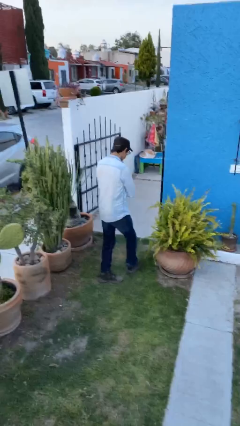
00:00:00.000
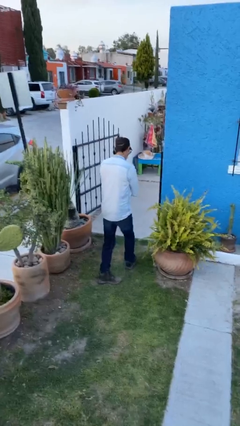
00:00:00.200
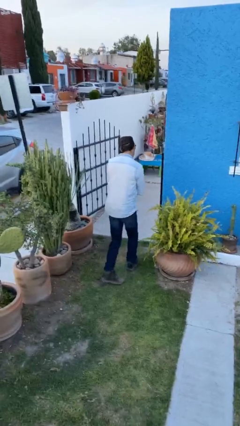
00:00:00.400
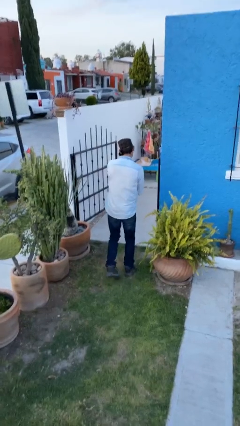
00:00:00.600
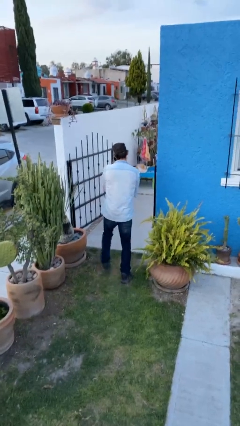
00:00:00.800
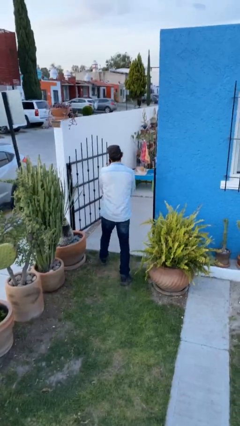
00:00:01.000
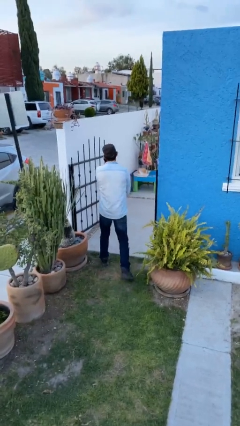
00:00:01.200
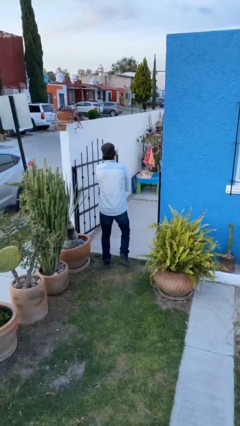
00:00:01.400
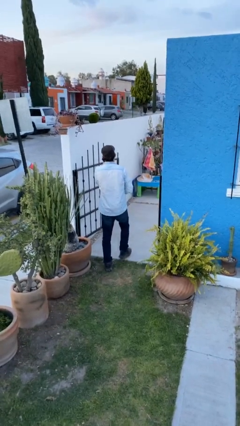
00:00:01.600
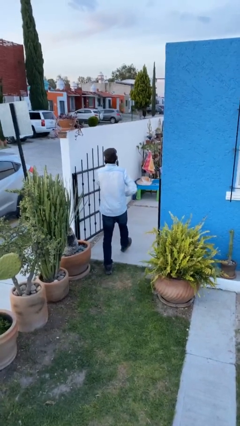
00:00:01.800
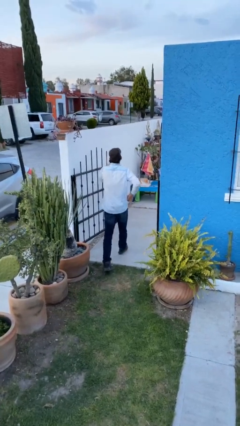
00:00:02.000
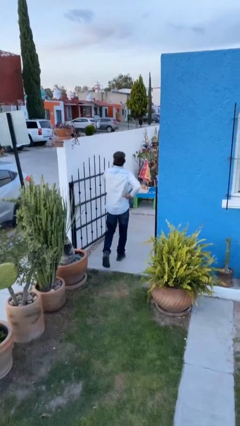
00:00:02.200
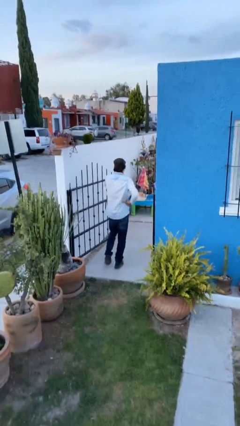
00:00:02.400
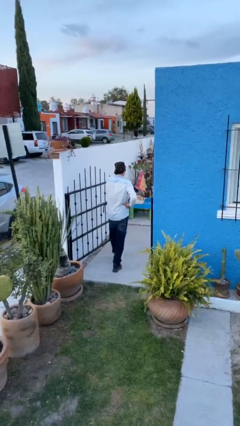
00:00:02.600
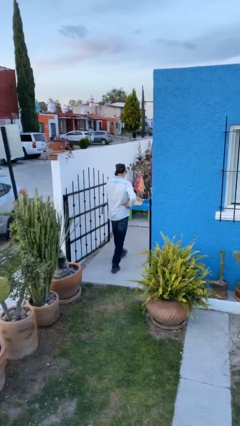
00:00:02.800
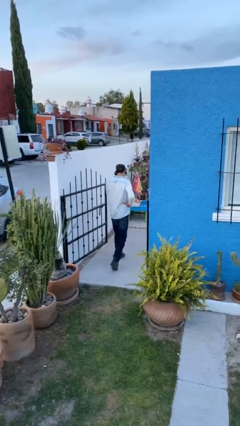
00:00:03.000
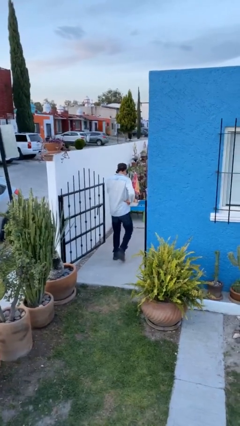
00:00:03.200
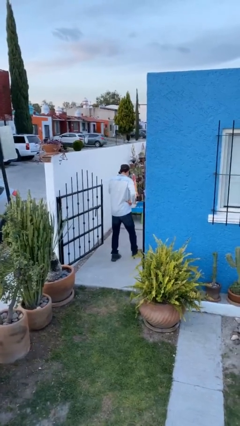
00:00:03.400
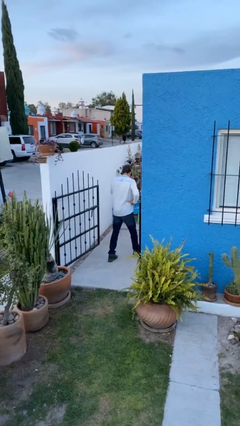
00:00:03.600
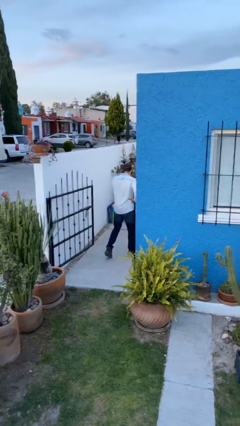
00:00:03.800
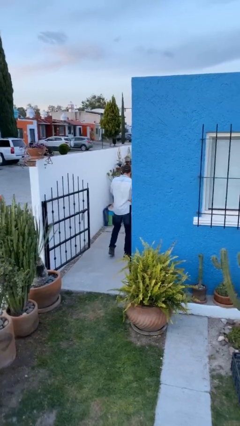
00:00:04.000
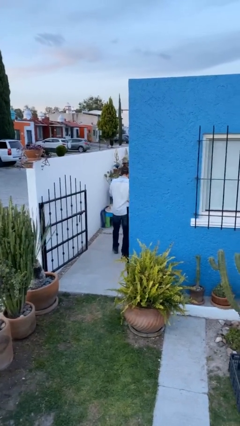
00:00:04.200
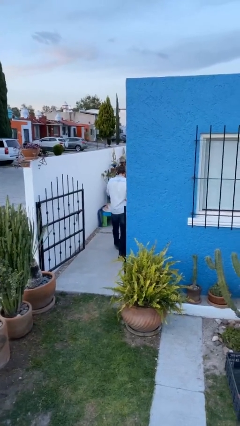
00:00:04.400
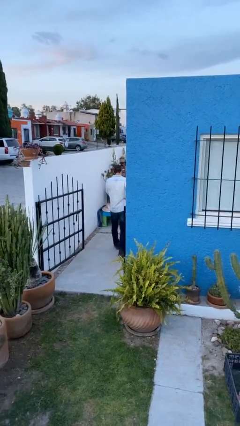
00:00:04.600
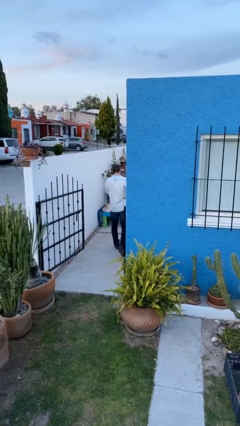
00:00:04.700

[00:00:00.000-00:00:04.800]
person exits scene through structure

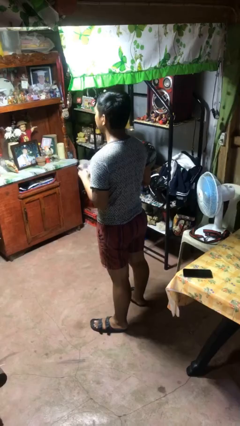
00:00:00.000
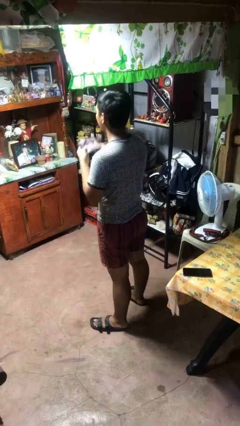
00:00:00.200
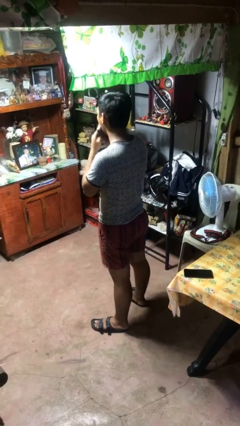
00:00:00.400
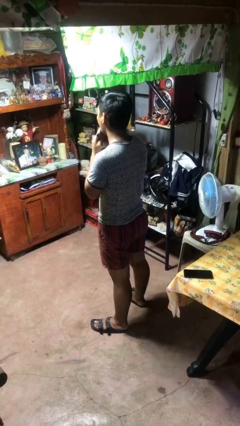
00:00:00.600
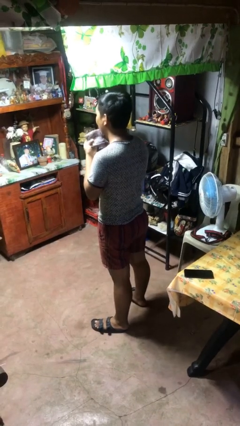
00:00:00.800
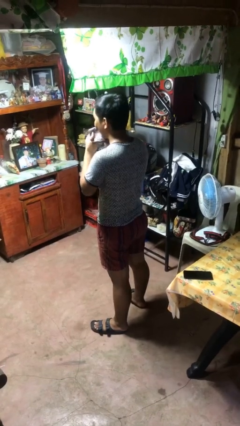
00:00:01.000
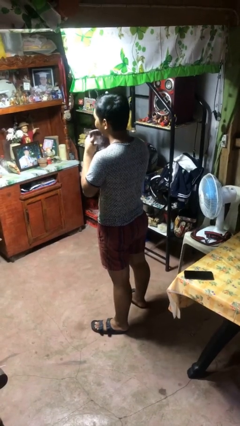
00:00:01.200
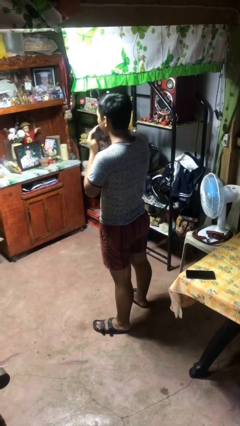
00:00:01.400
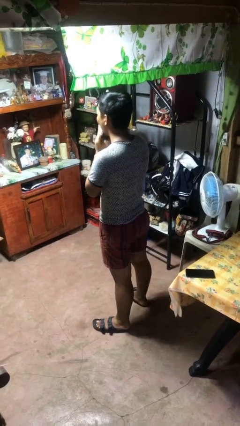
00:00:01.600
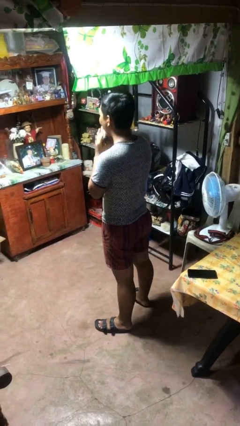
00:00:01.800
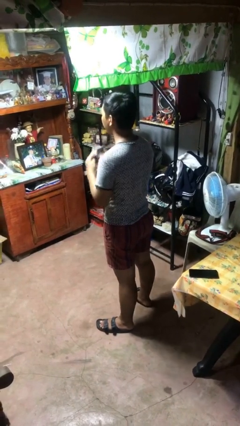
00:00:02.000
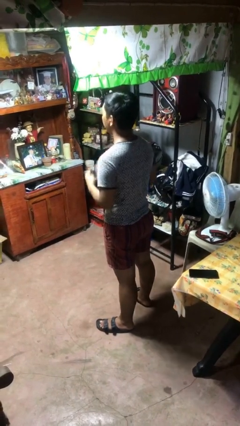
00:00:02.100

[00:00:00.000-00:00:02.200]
person wipes mouth with napkin

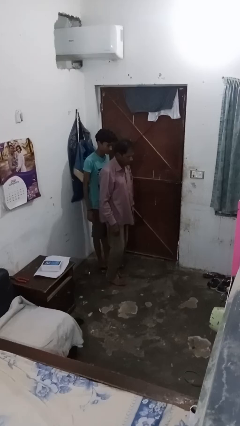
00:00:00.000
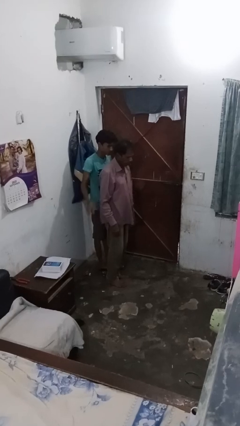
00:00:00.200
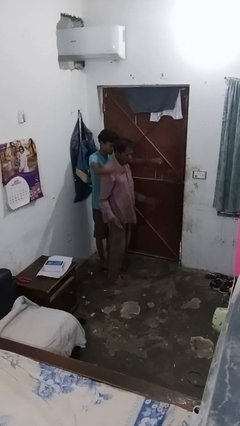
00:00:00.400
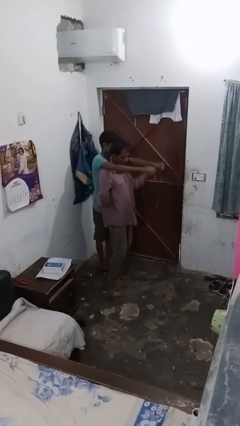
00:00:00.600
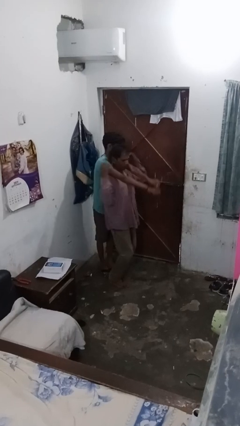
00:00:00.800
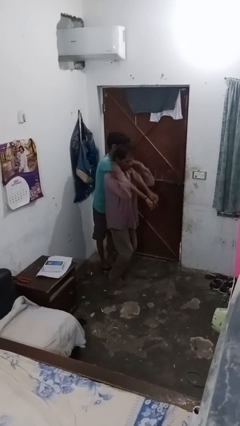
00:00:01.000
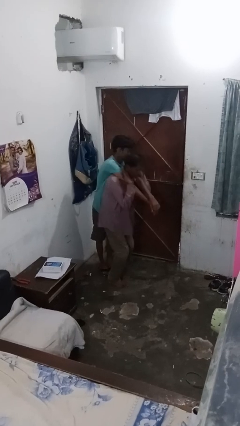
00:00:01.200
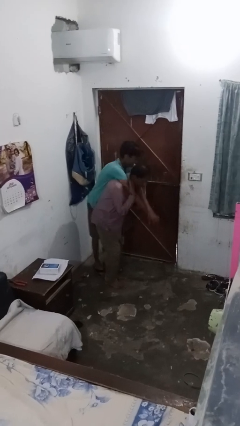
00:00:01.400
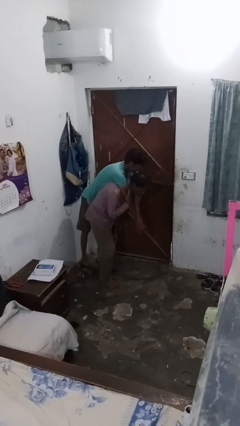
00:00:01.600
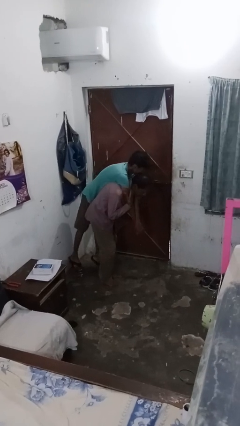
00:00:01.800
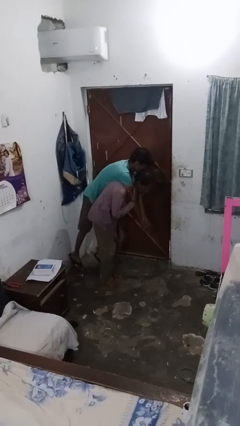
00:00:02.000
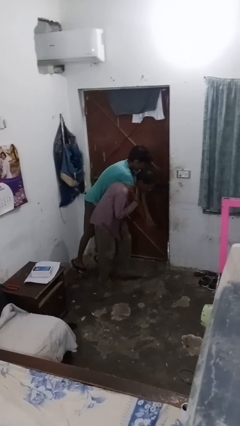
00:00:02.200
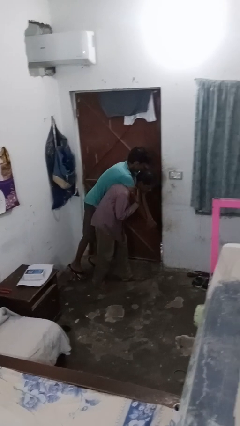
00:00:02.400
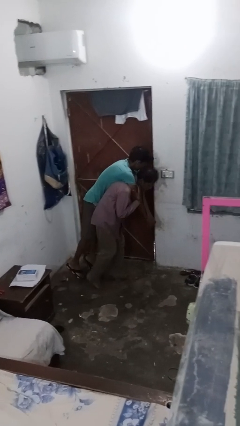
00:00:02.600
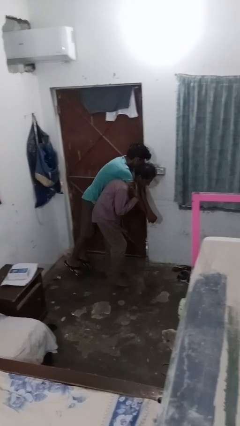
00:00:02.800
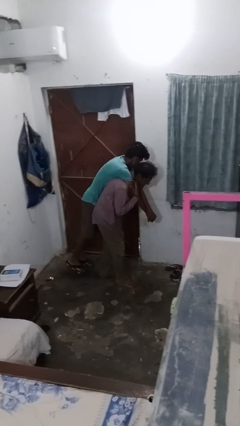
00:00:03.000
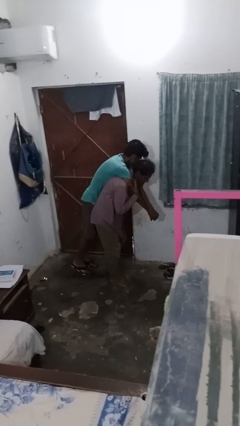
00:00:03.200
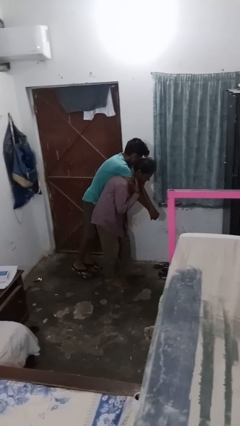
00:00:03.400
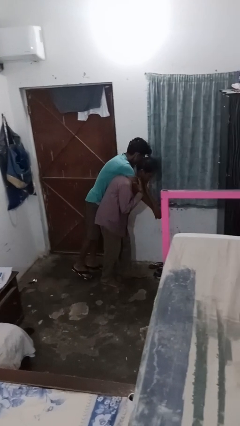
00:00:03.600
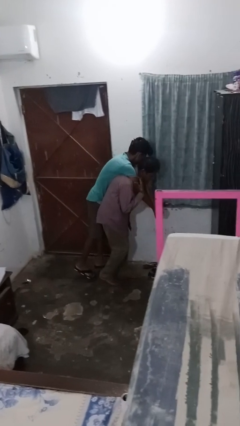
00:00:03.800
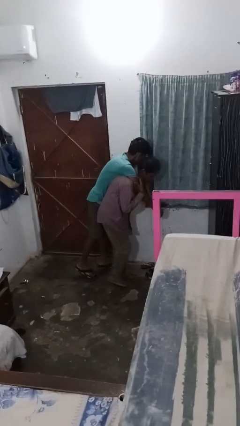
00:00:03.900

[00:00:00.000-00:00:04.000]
person carries person on back

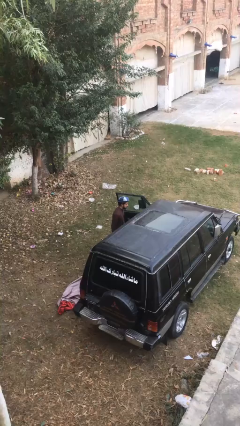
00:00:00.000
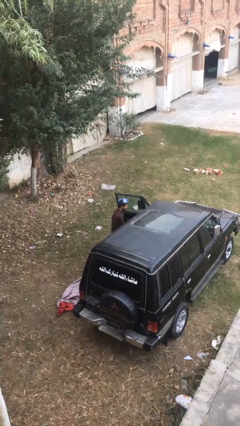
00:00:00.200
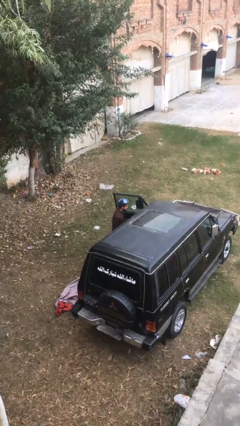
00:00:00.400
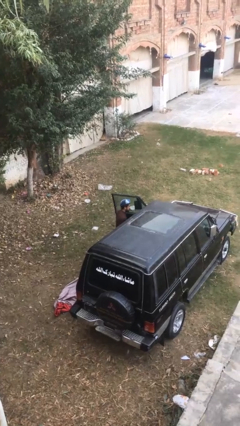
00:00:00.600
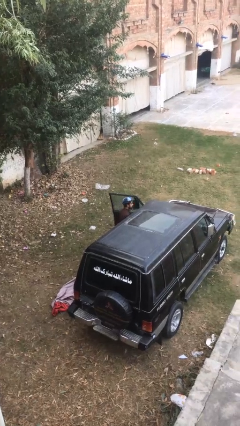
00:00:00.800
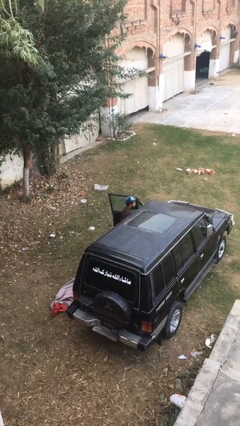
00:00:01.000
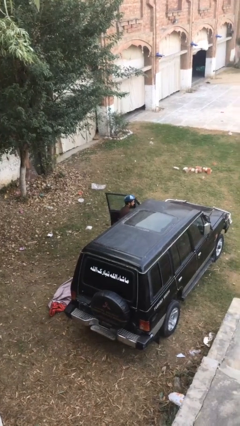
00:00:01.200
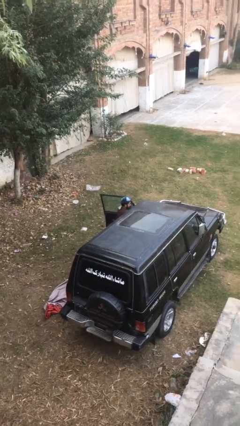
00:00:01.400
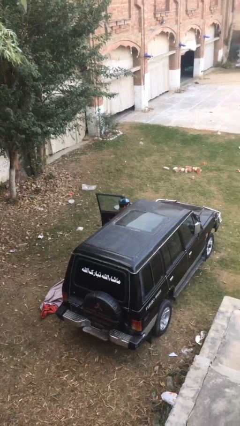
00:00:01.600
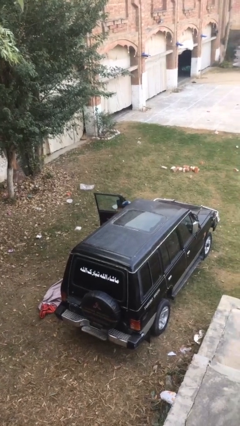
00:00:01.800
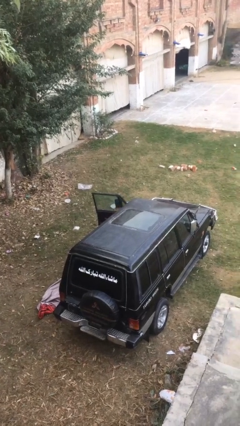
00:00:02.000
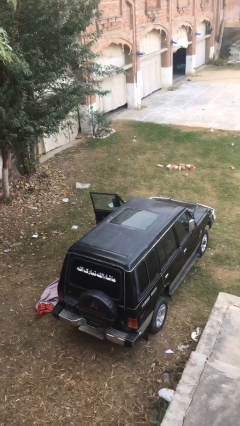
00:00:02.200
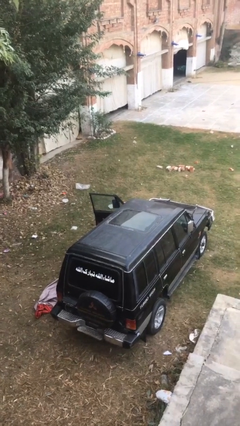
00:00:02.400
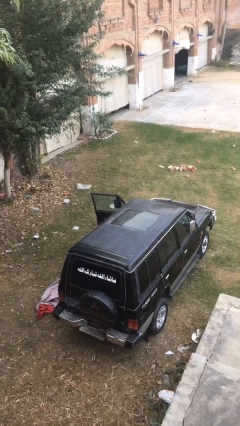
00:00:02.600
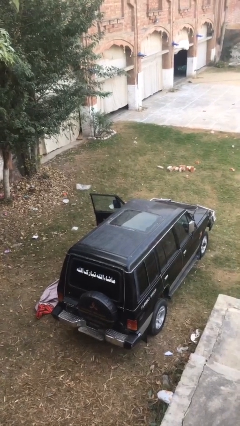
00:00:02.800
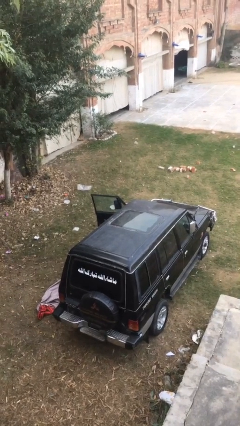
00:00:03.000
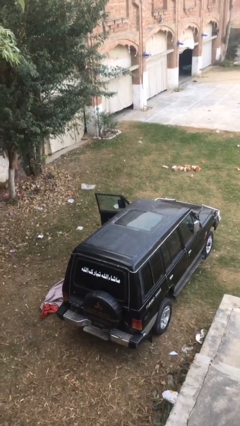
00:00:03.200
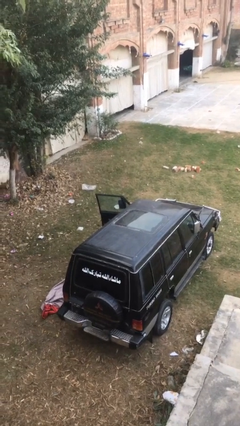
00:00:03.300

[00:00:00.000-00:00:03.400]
person enters car

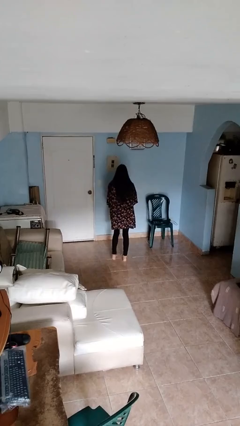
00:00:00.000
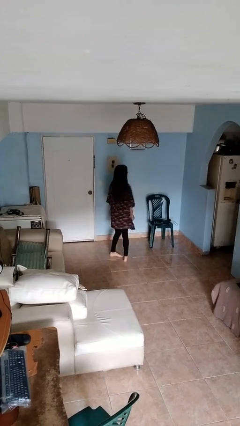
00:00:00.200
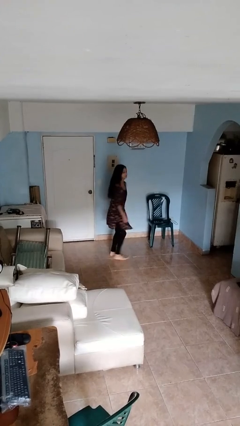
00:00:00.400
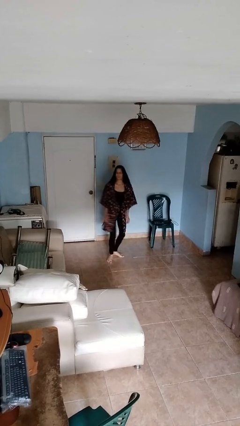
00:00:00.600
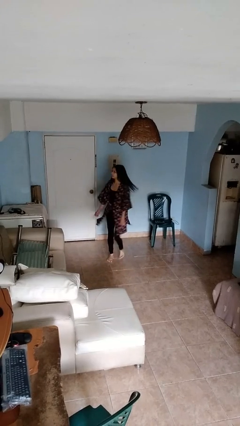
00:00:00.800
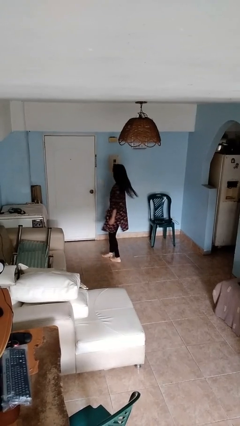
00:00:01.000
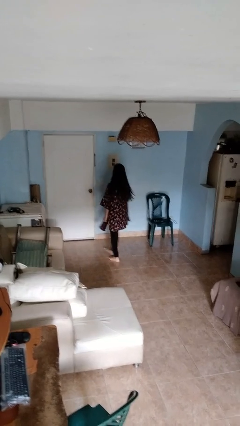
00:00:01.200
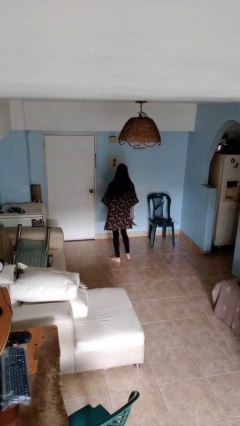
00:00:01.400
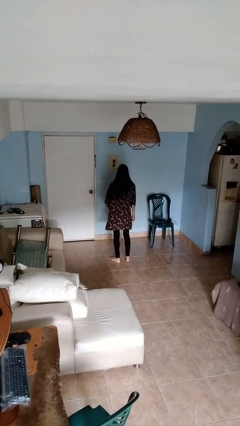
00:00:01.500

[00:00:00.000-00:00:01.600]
person twirls

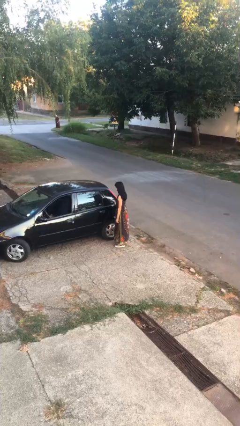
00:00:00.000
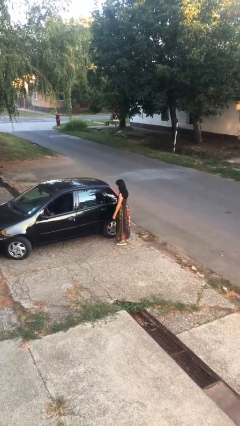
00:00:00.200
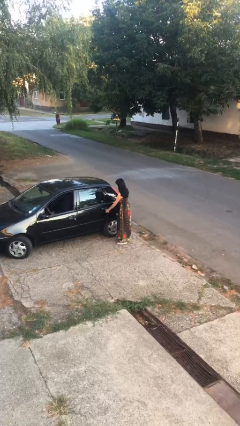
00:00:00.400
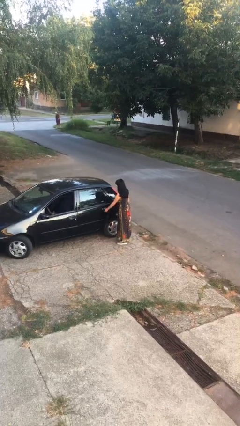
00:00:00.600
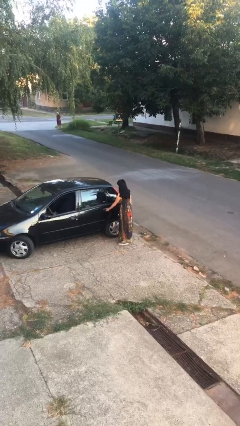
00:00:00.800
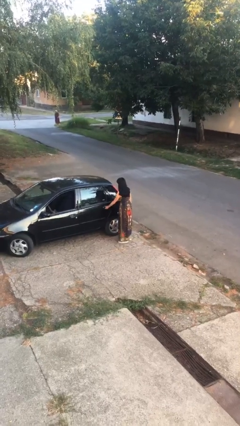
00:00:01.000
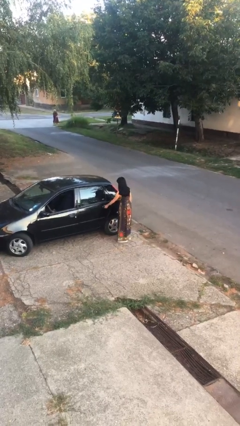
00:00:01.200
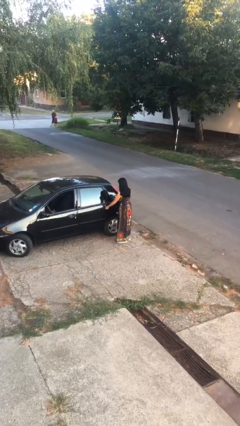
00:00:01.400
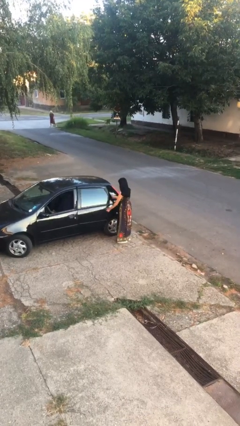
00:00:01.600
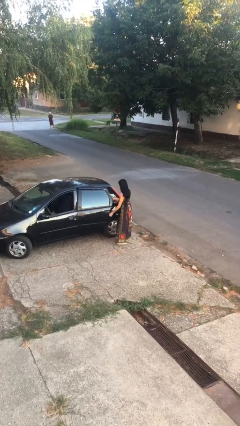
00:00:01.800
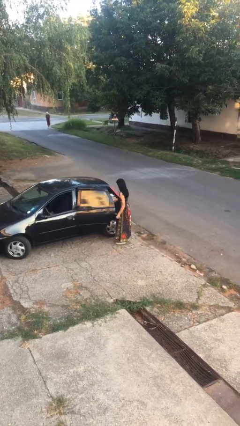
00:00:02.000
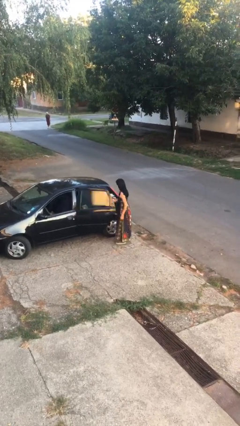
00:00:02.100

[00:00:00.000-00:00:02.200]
person opens car door
